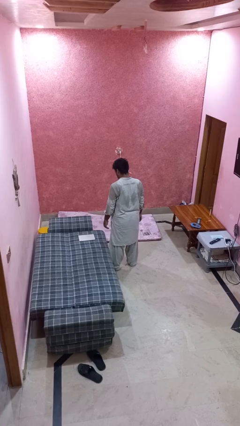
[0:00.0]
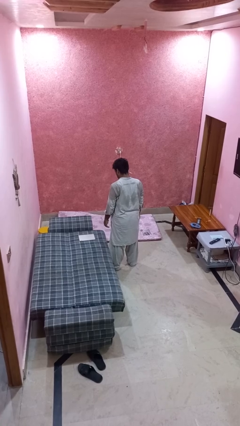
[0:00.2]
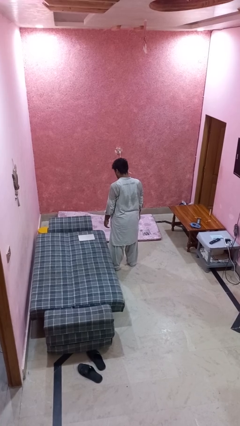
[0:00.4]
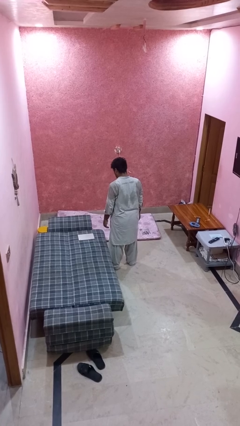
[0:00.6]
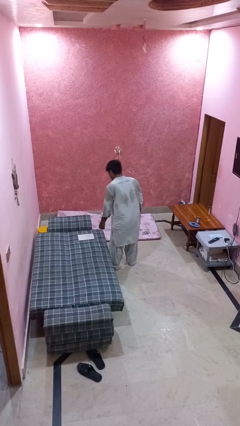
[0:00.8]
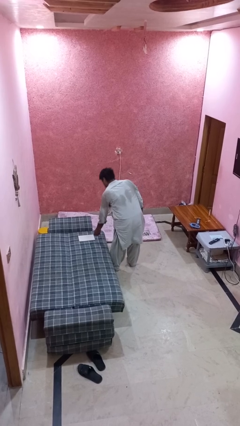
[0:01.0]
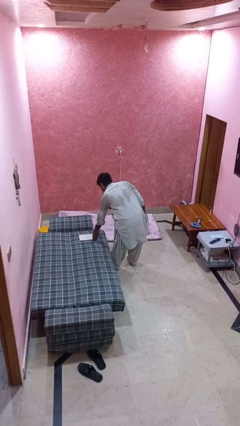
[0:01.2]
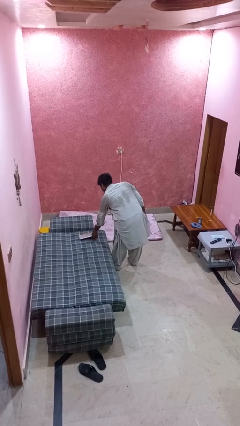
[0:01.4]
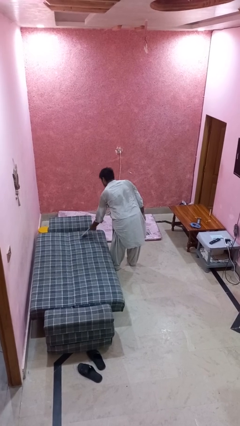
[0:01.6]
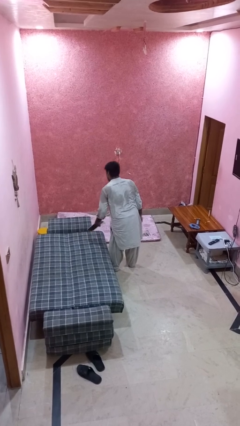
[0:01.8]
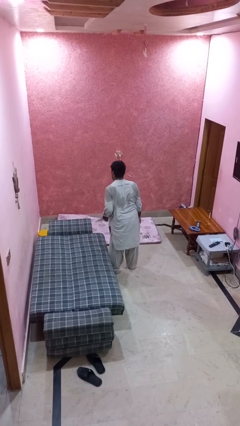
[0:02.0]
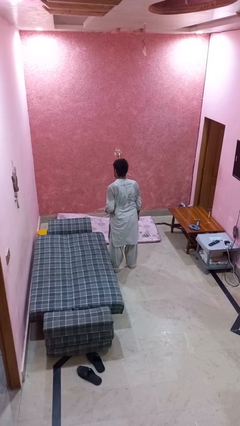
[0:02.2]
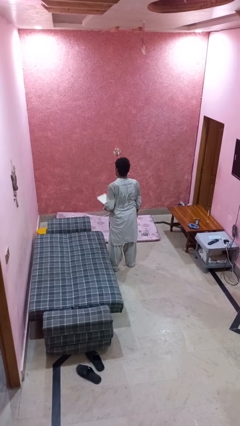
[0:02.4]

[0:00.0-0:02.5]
person picks up object from bed

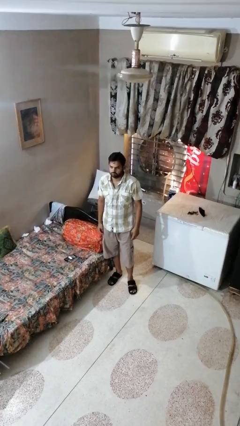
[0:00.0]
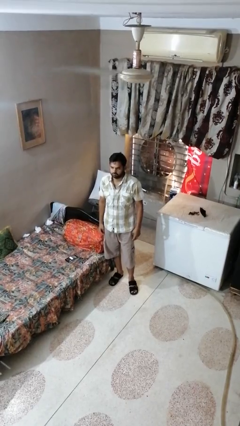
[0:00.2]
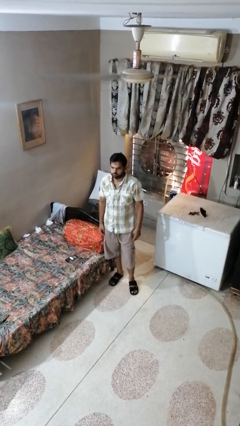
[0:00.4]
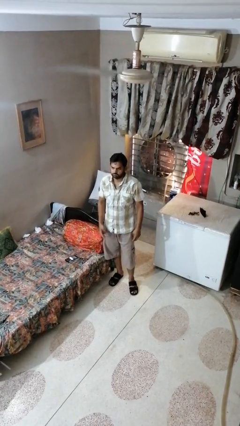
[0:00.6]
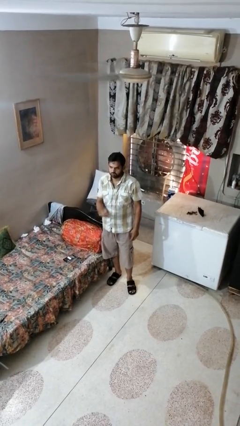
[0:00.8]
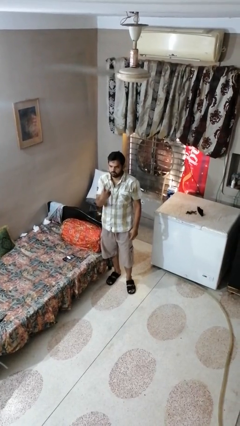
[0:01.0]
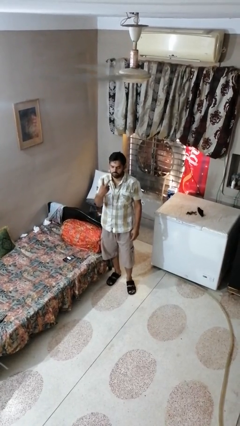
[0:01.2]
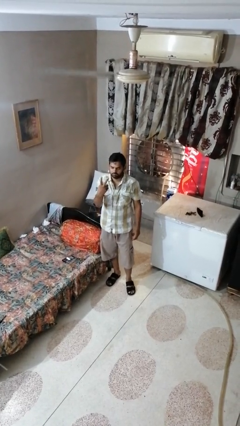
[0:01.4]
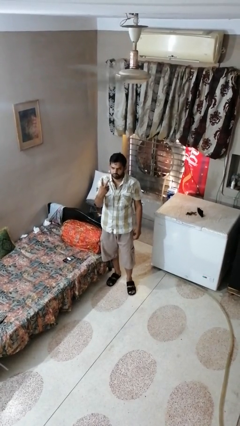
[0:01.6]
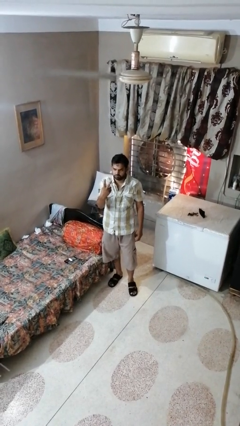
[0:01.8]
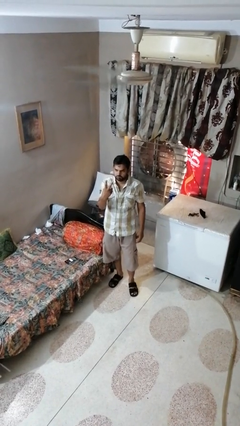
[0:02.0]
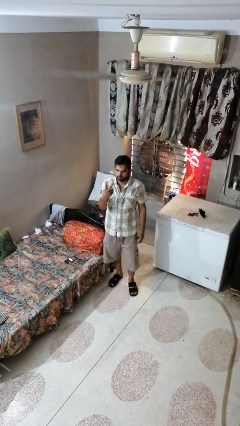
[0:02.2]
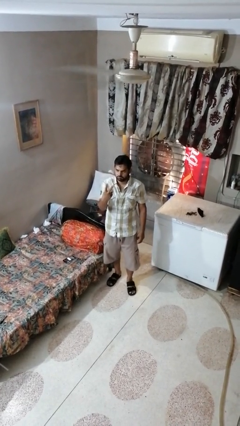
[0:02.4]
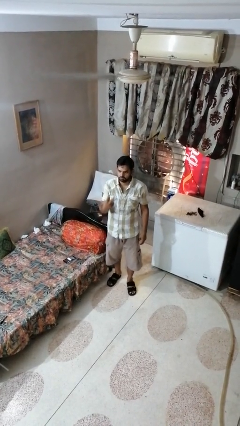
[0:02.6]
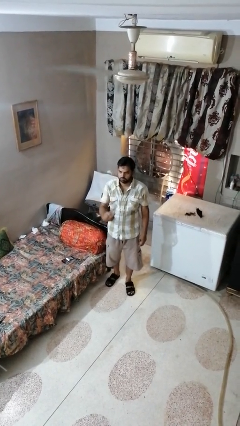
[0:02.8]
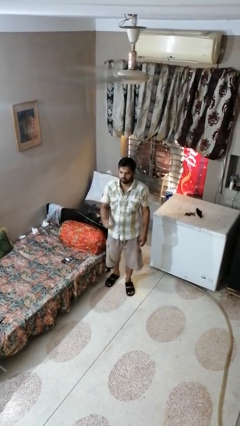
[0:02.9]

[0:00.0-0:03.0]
person gestures peace

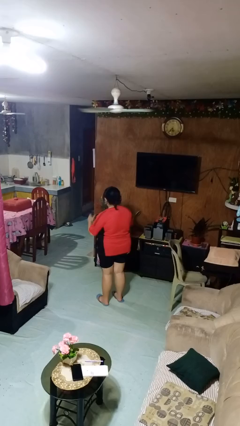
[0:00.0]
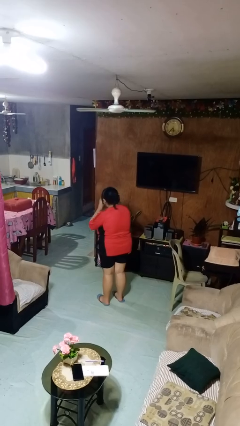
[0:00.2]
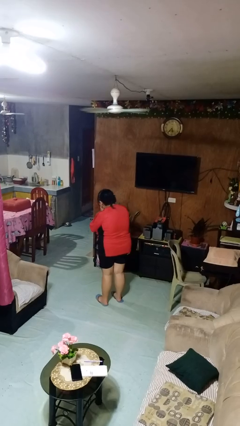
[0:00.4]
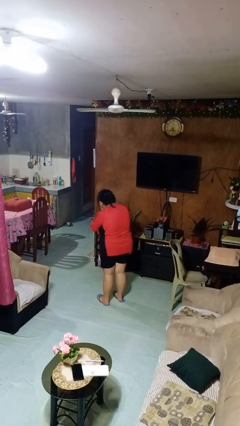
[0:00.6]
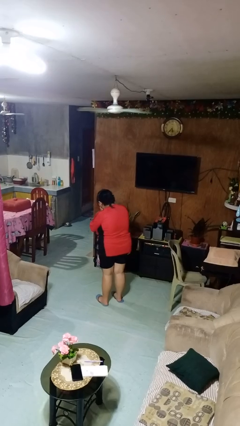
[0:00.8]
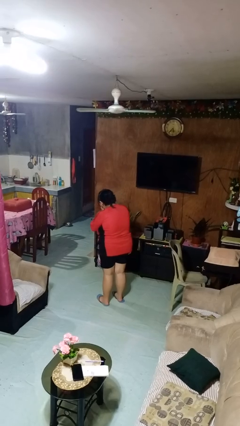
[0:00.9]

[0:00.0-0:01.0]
person sneezes into hand

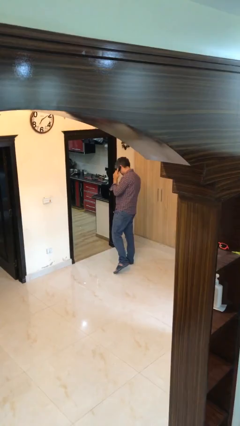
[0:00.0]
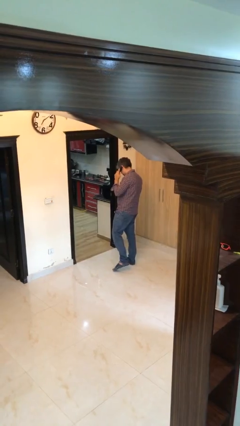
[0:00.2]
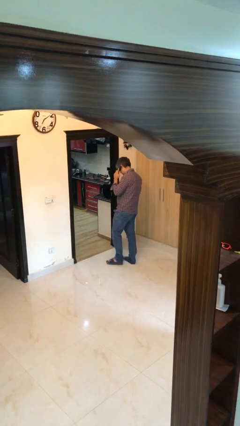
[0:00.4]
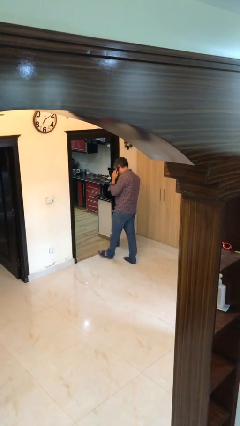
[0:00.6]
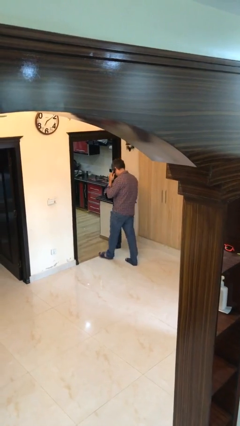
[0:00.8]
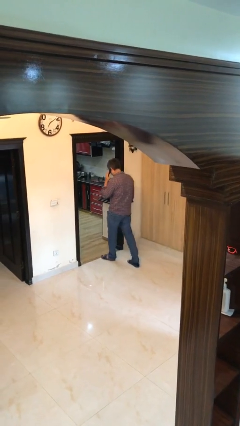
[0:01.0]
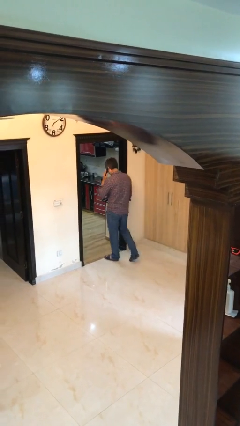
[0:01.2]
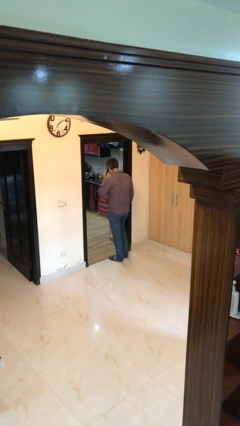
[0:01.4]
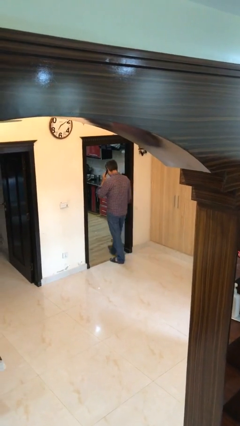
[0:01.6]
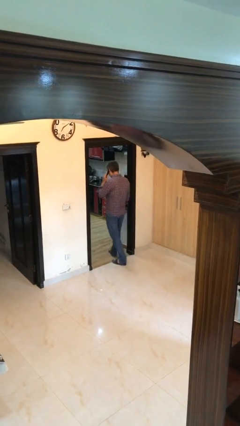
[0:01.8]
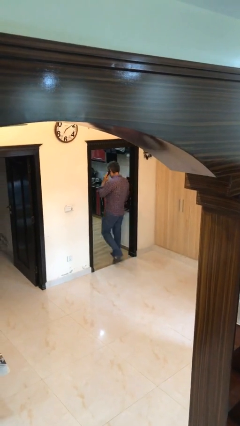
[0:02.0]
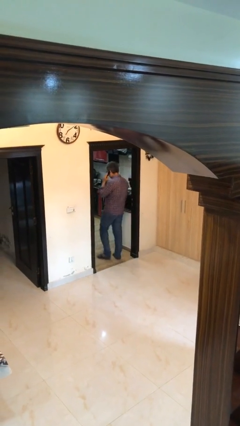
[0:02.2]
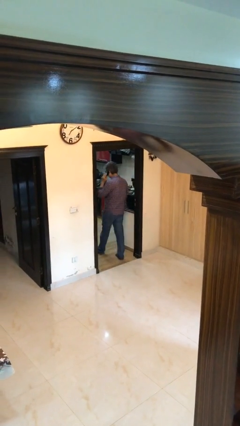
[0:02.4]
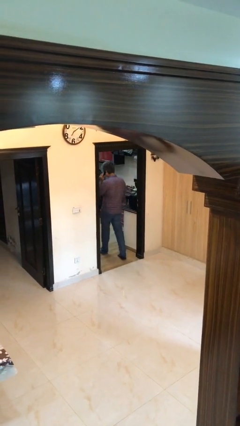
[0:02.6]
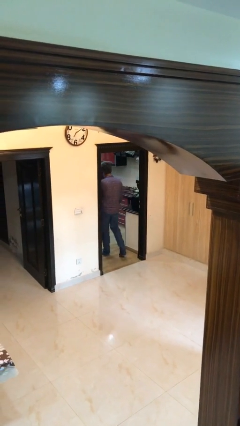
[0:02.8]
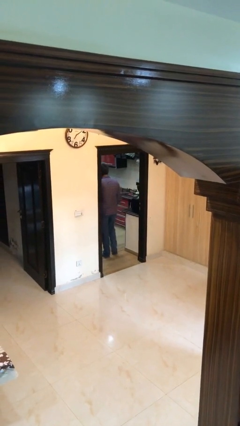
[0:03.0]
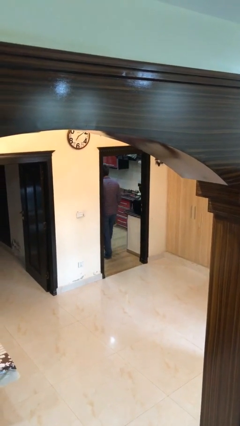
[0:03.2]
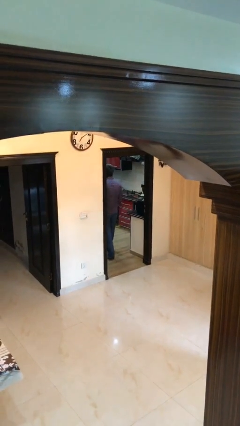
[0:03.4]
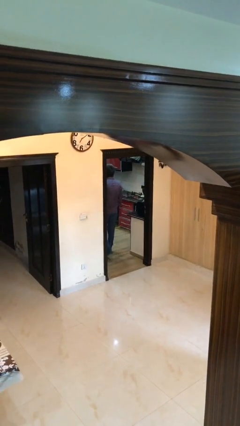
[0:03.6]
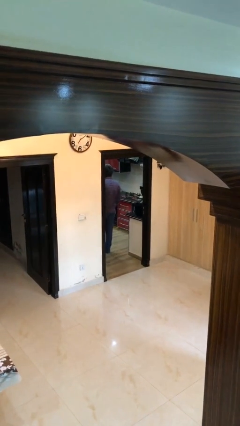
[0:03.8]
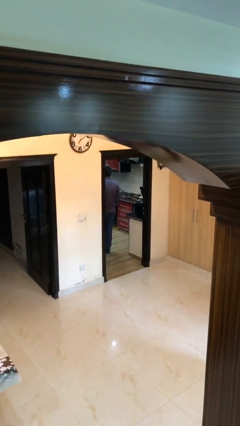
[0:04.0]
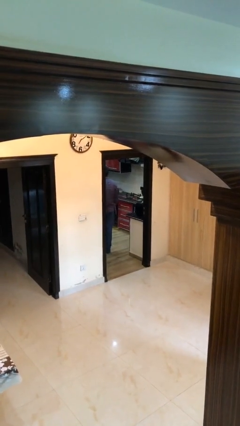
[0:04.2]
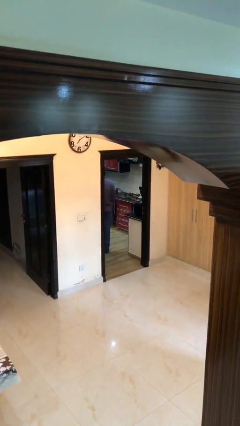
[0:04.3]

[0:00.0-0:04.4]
person exits scene through structure

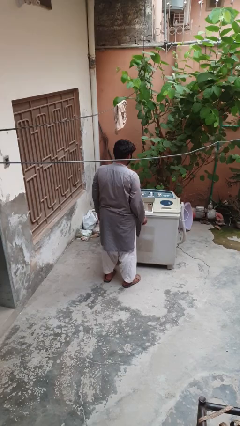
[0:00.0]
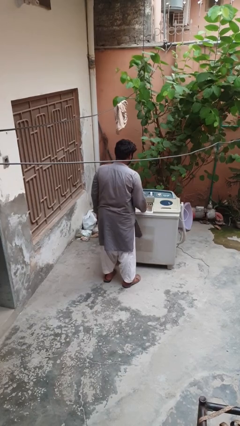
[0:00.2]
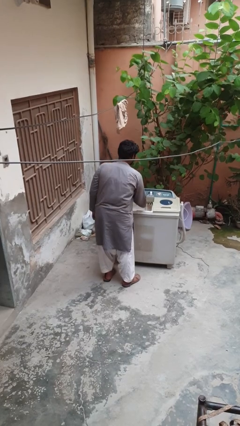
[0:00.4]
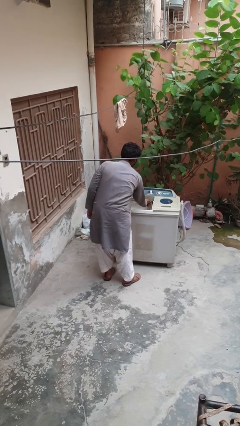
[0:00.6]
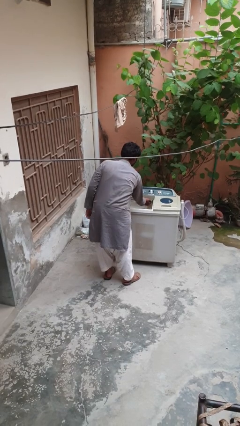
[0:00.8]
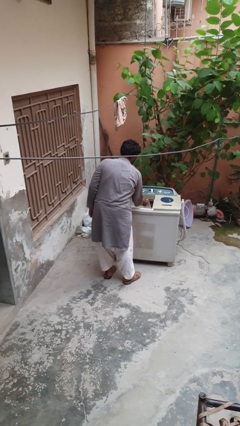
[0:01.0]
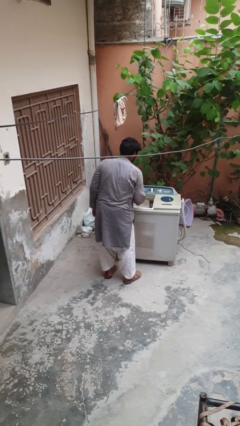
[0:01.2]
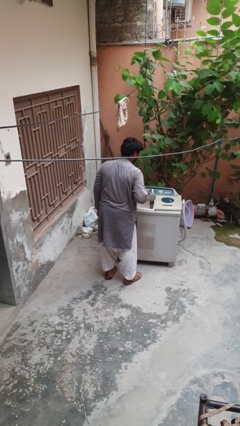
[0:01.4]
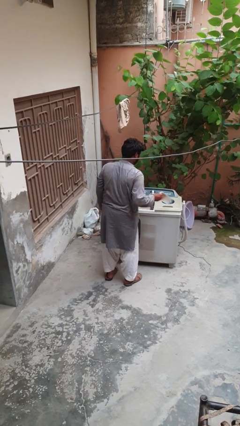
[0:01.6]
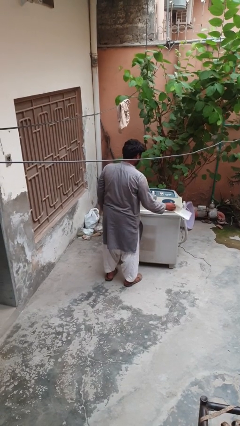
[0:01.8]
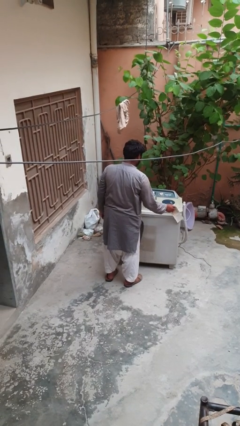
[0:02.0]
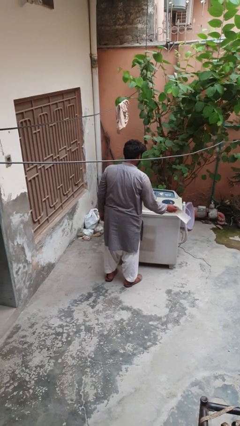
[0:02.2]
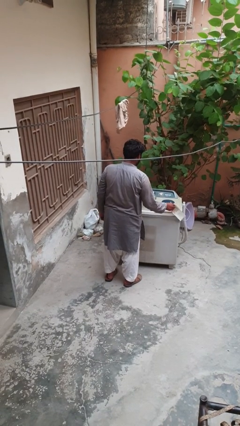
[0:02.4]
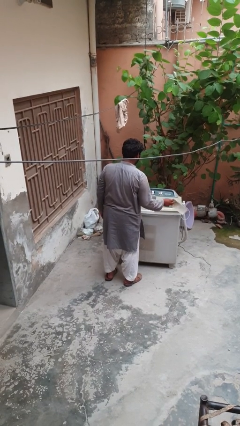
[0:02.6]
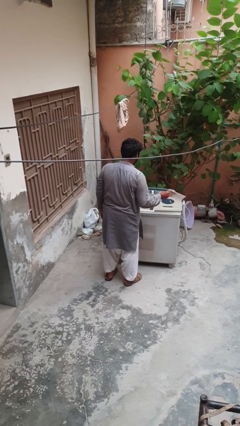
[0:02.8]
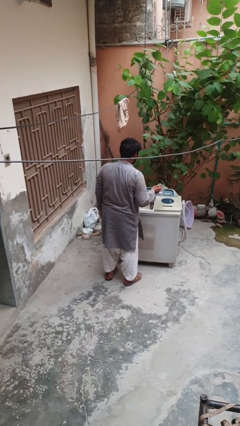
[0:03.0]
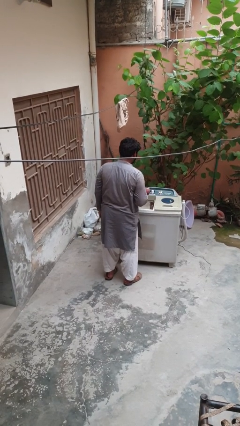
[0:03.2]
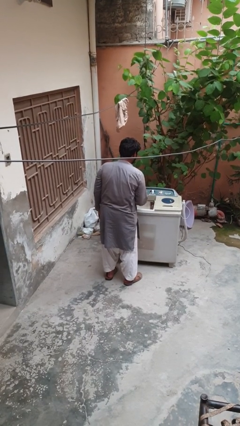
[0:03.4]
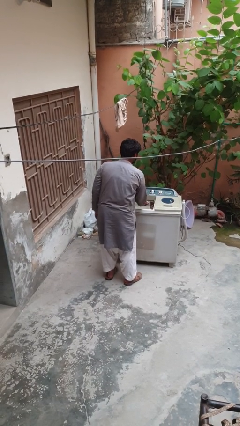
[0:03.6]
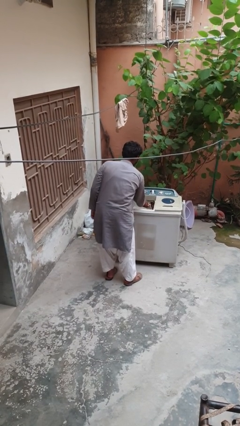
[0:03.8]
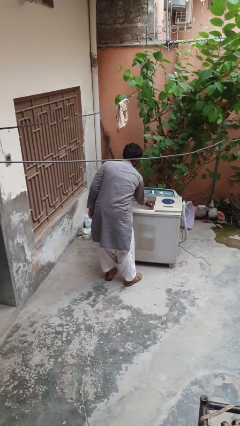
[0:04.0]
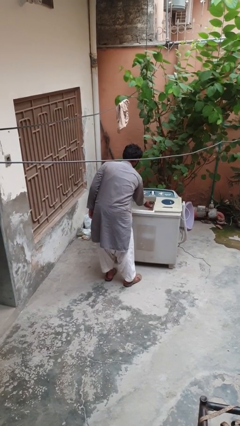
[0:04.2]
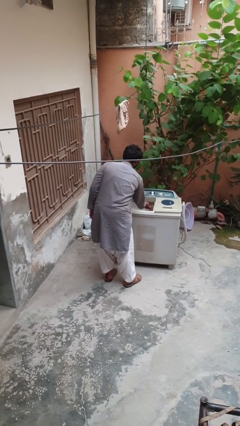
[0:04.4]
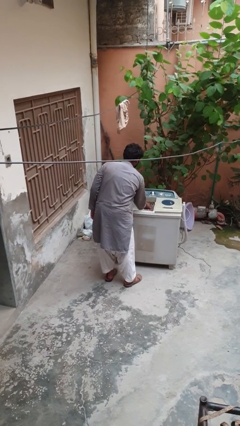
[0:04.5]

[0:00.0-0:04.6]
person cleans dryer lint trap

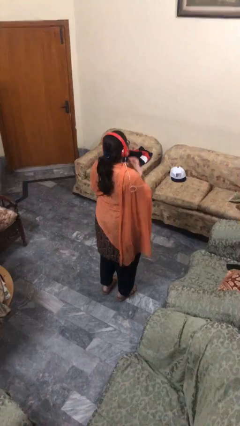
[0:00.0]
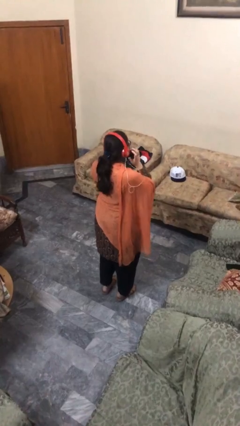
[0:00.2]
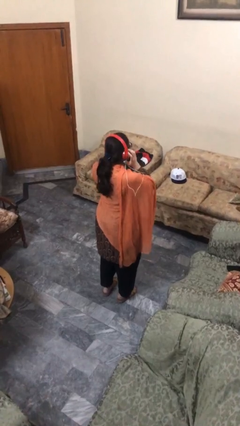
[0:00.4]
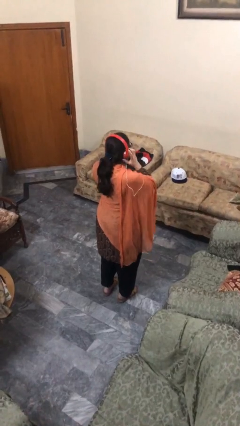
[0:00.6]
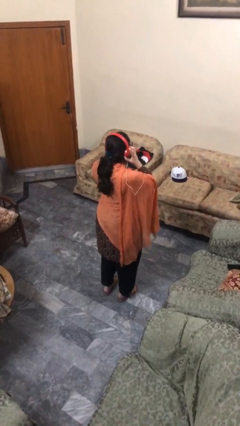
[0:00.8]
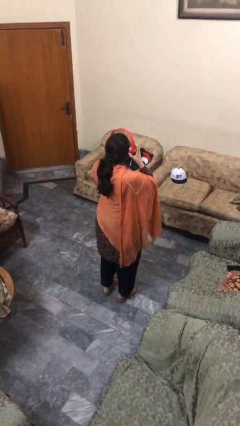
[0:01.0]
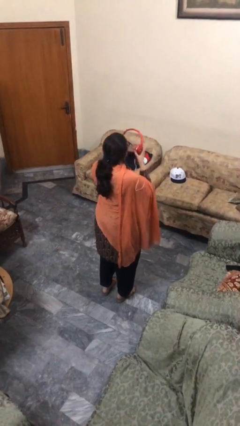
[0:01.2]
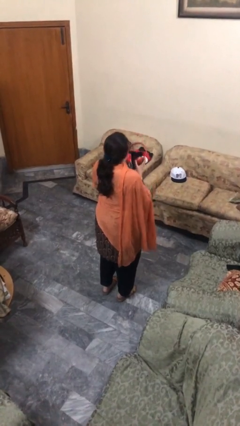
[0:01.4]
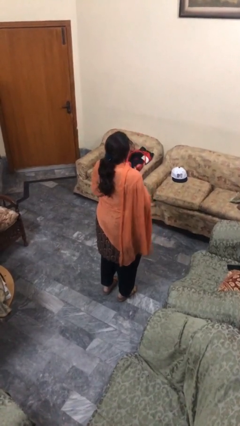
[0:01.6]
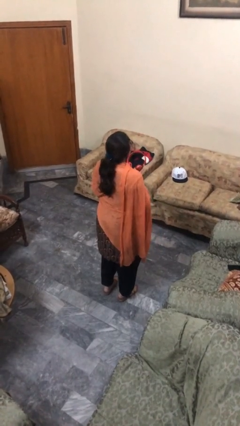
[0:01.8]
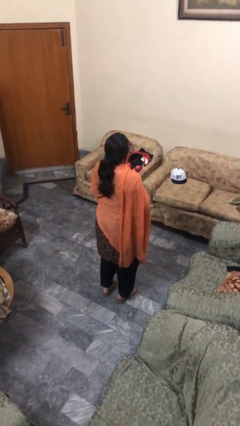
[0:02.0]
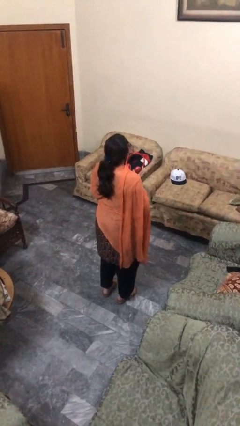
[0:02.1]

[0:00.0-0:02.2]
person takes off headphones

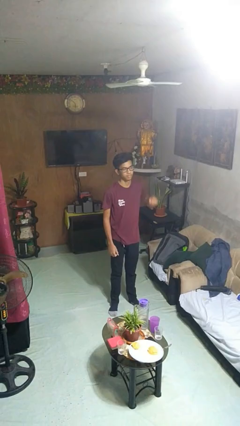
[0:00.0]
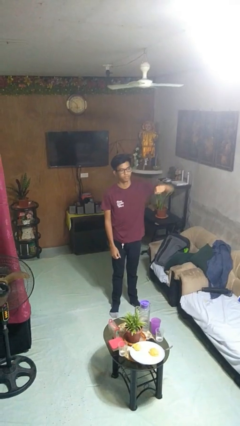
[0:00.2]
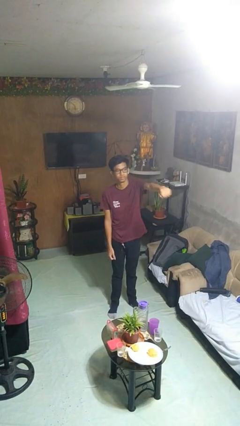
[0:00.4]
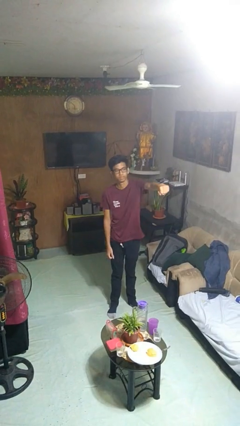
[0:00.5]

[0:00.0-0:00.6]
person punches
